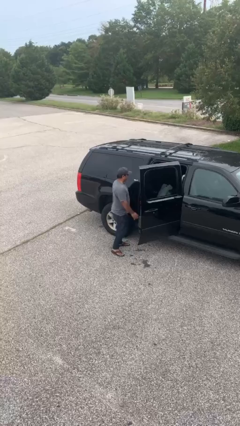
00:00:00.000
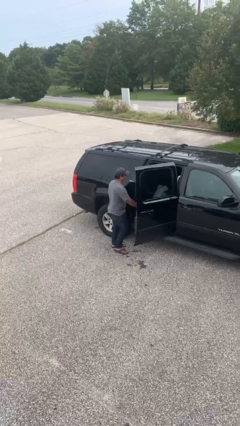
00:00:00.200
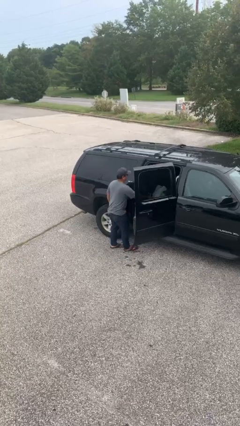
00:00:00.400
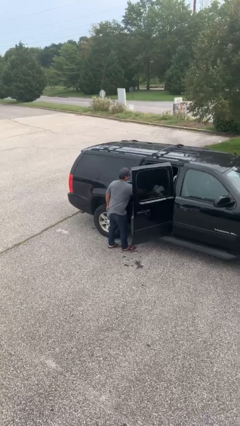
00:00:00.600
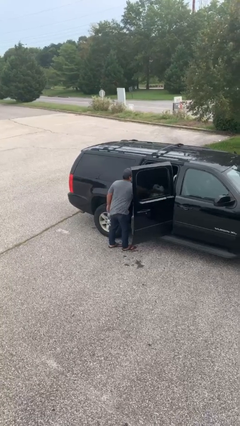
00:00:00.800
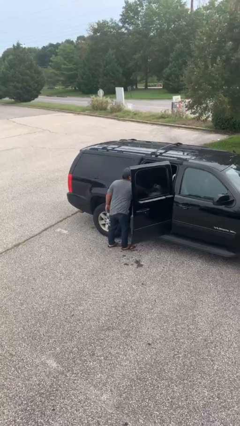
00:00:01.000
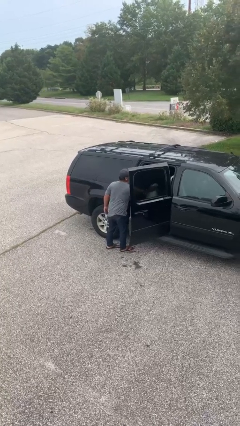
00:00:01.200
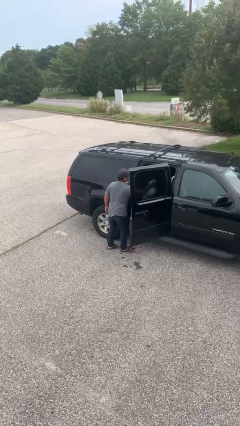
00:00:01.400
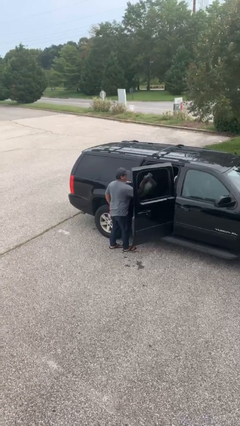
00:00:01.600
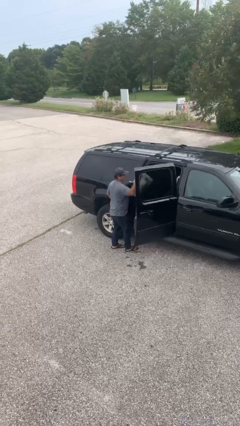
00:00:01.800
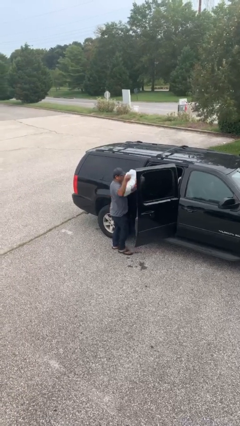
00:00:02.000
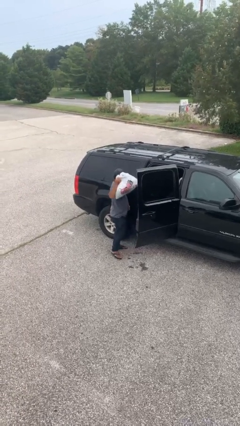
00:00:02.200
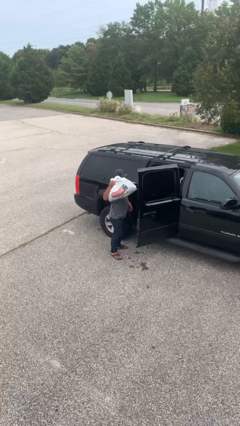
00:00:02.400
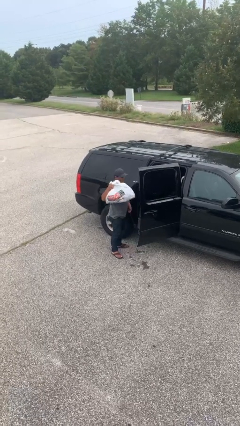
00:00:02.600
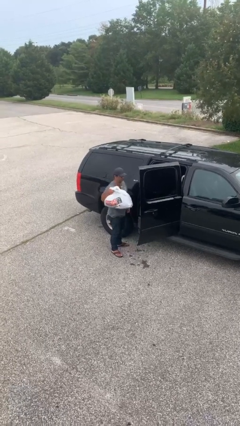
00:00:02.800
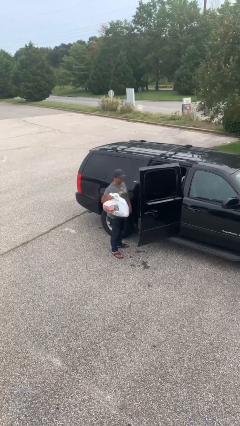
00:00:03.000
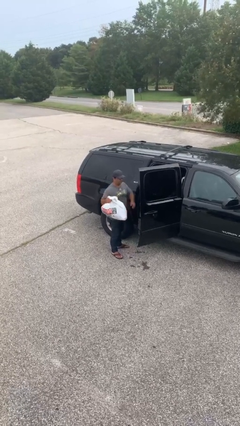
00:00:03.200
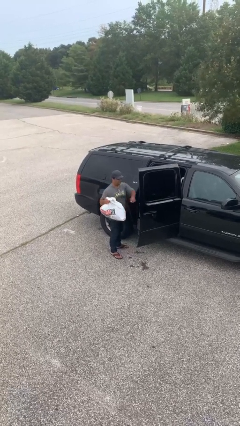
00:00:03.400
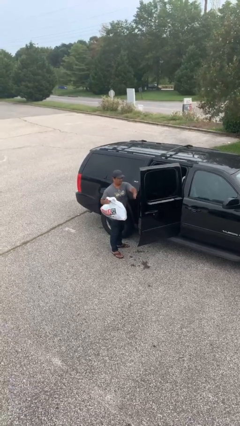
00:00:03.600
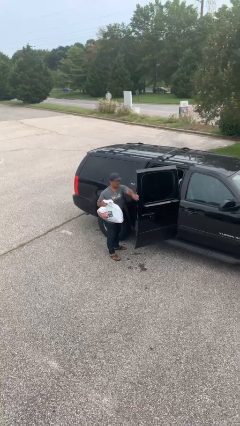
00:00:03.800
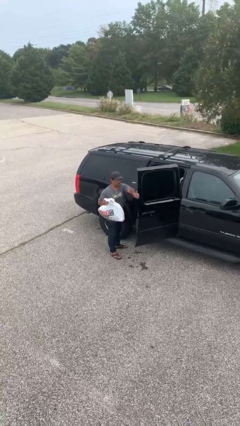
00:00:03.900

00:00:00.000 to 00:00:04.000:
person unloads car

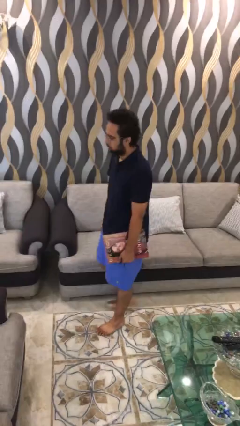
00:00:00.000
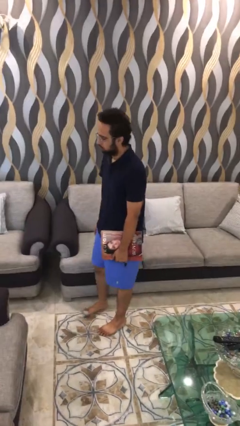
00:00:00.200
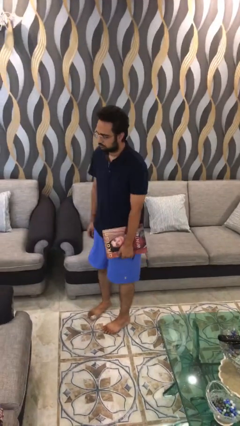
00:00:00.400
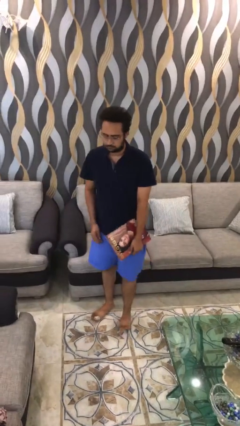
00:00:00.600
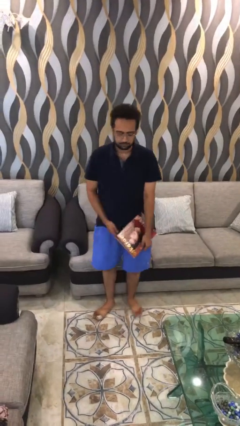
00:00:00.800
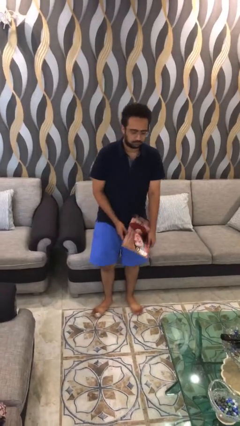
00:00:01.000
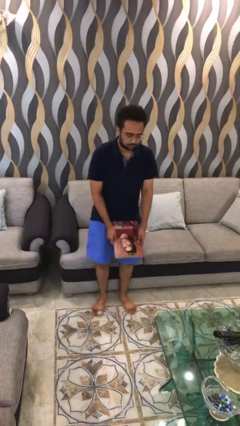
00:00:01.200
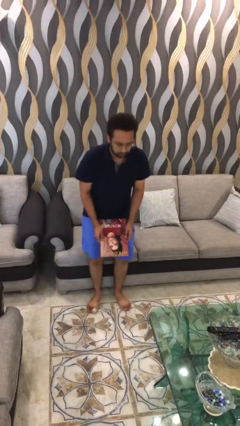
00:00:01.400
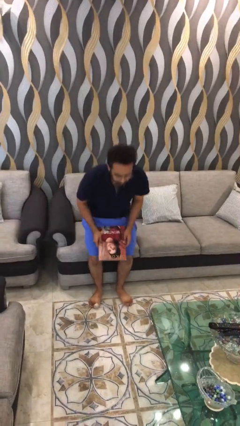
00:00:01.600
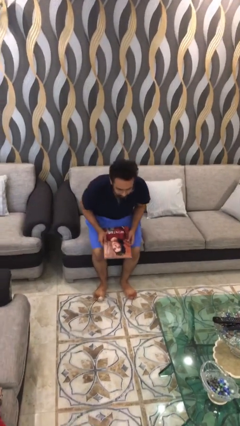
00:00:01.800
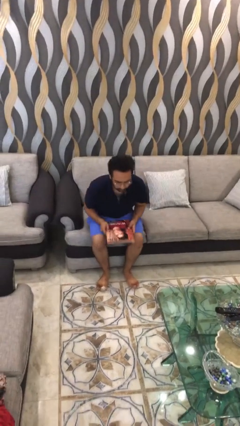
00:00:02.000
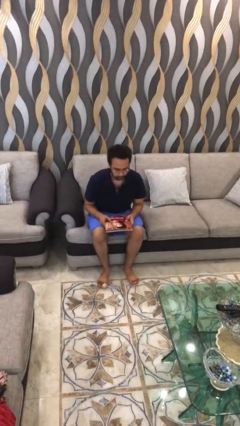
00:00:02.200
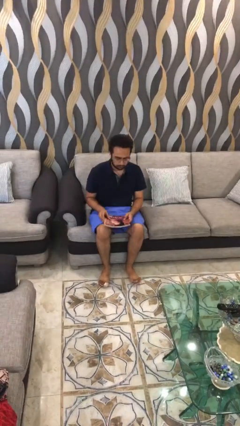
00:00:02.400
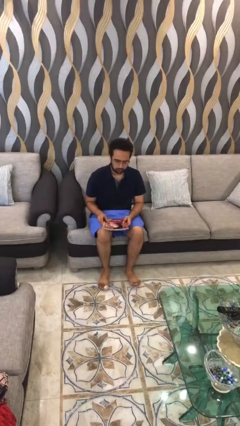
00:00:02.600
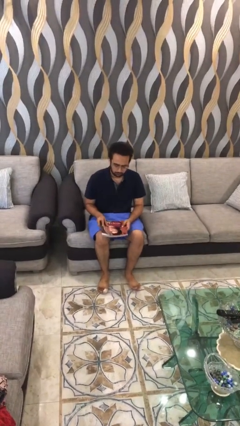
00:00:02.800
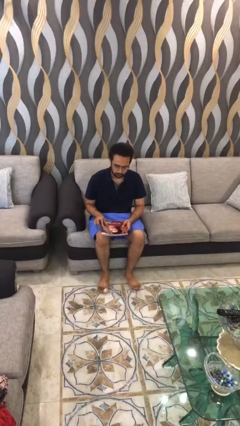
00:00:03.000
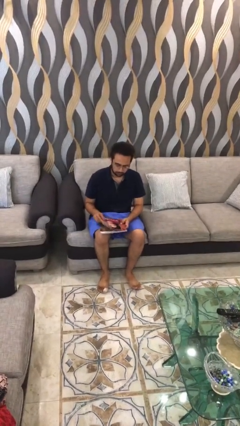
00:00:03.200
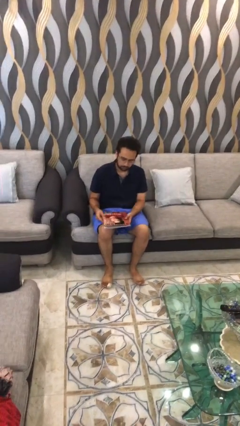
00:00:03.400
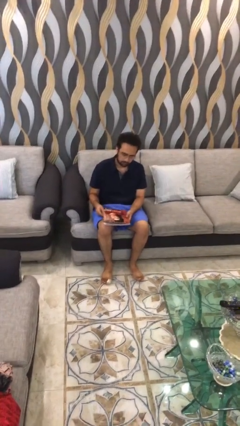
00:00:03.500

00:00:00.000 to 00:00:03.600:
person sits down

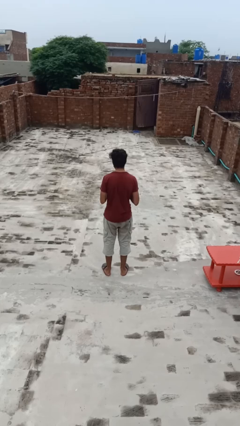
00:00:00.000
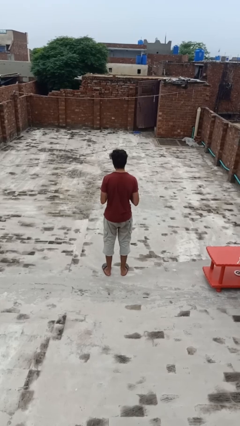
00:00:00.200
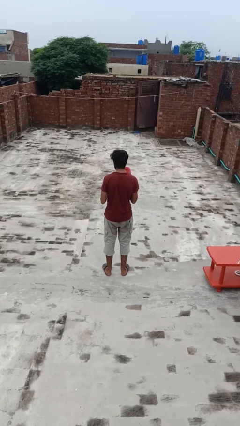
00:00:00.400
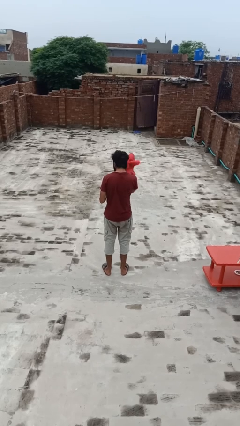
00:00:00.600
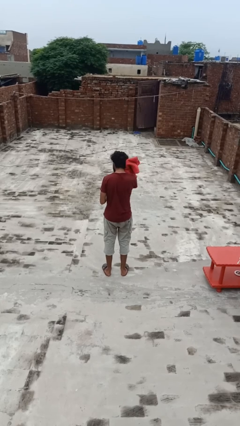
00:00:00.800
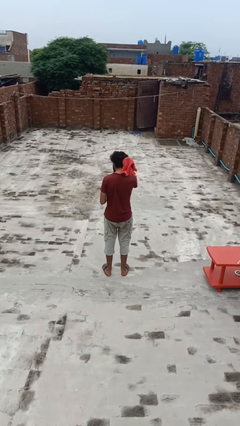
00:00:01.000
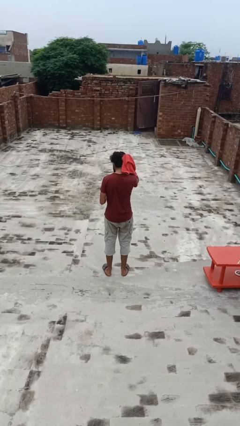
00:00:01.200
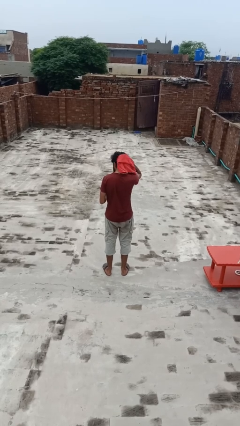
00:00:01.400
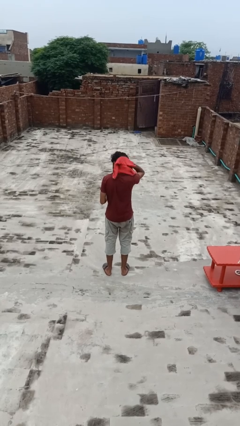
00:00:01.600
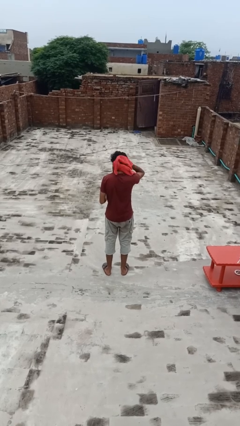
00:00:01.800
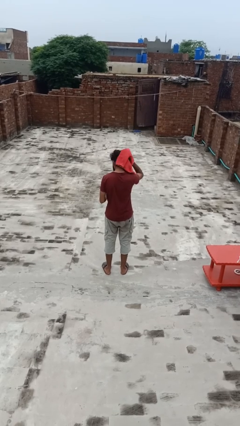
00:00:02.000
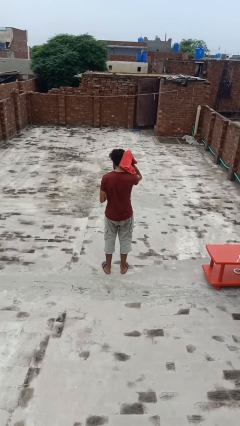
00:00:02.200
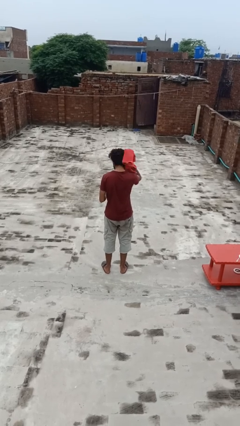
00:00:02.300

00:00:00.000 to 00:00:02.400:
person dries hair with towel

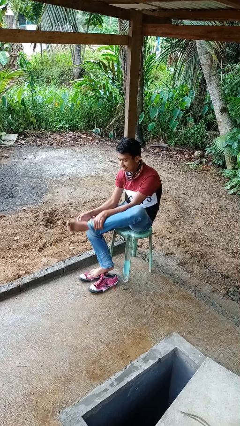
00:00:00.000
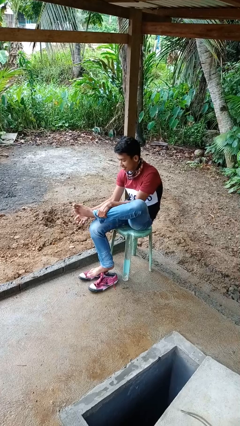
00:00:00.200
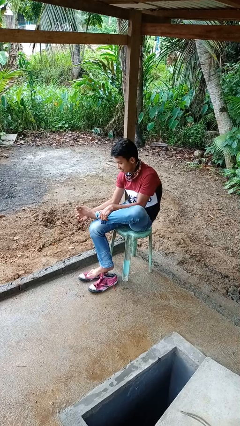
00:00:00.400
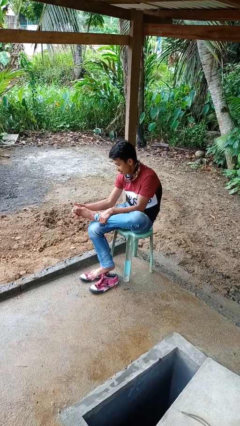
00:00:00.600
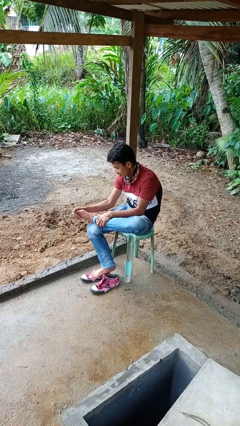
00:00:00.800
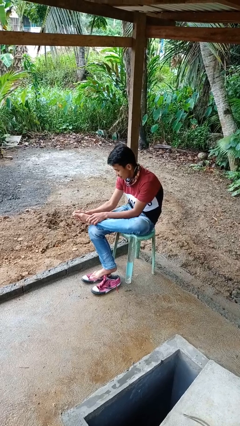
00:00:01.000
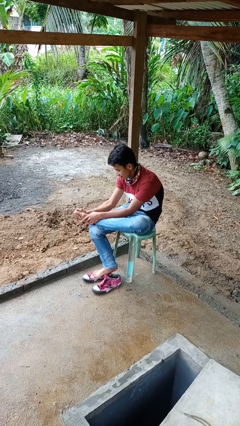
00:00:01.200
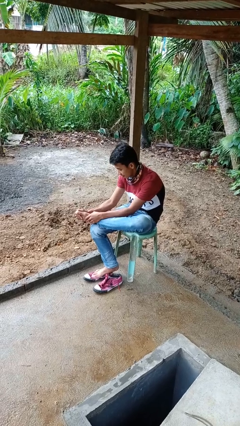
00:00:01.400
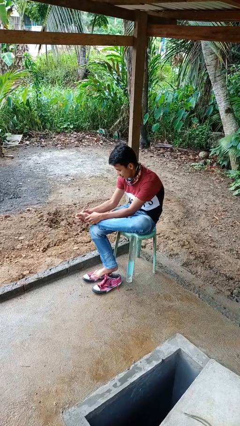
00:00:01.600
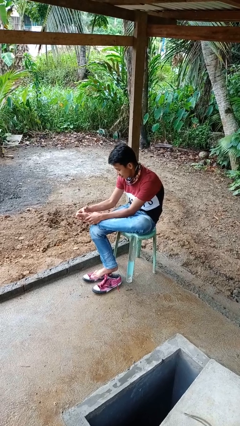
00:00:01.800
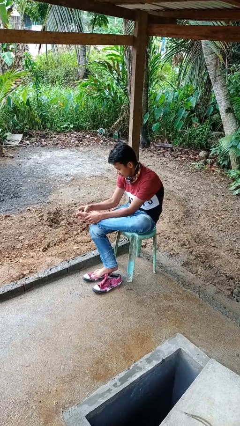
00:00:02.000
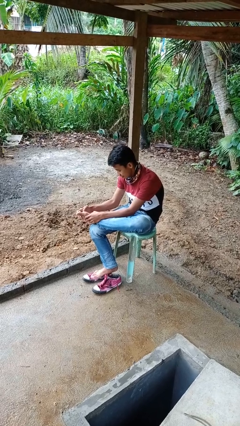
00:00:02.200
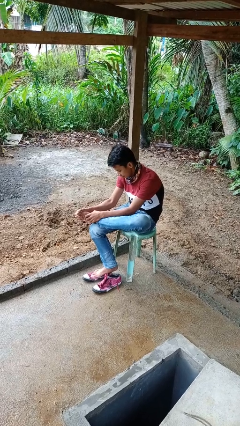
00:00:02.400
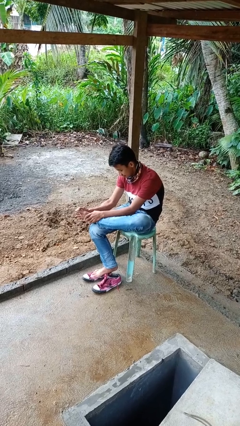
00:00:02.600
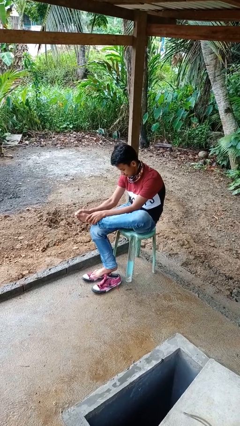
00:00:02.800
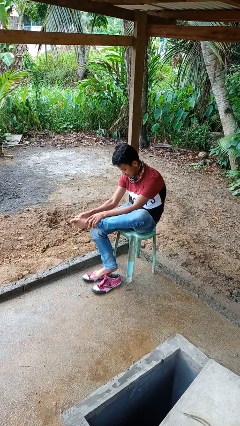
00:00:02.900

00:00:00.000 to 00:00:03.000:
person rubs foot

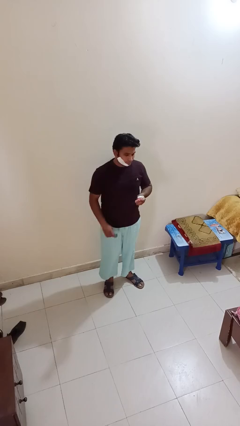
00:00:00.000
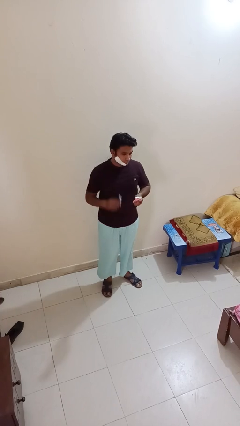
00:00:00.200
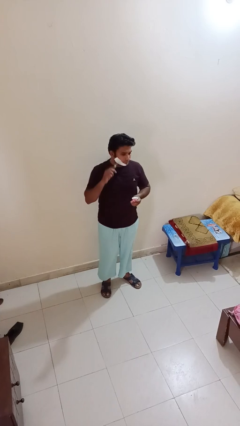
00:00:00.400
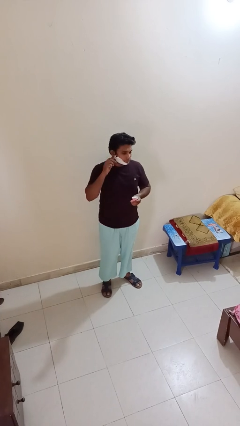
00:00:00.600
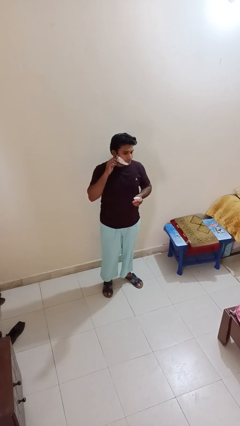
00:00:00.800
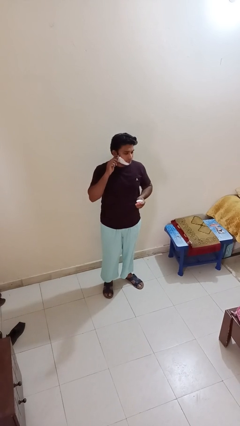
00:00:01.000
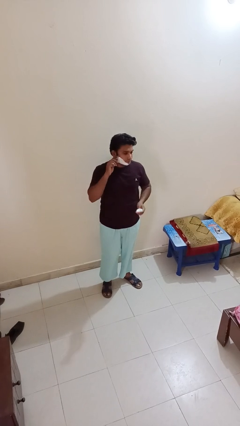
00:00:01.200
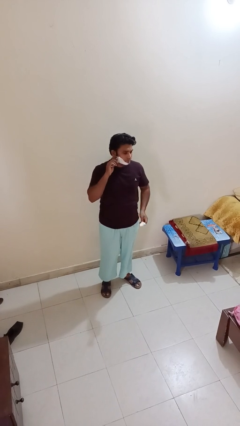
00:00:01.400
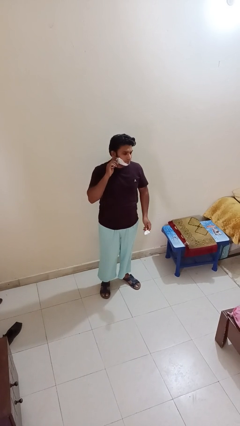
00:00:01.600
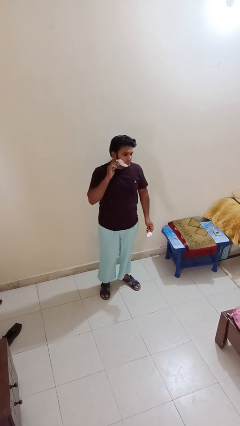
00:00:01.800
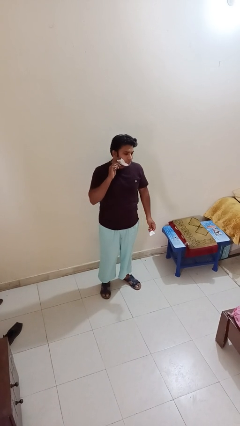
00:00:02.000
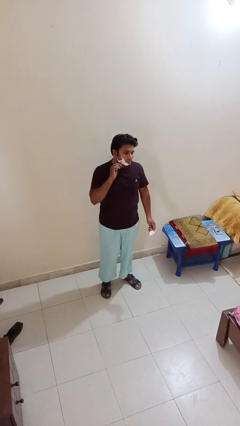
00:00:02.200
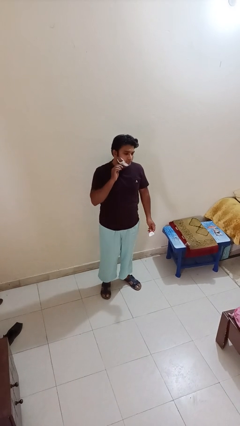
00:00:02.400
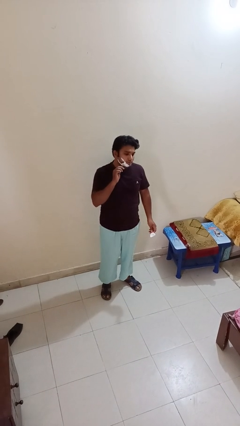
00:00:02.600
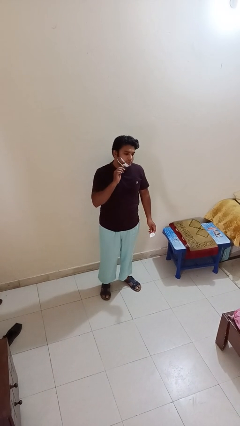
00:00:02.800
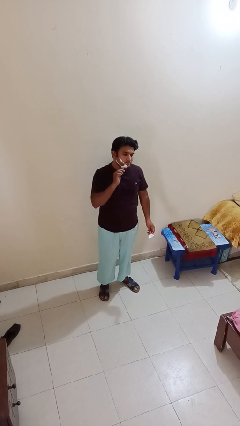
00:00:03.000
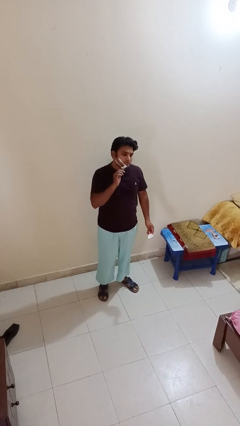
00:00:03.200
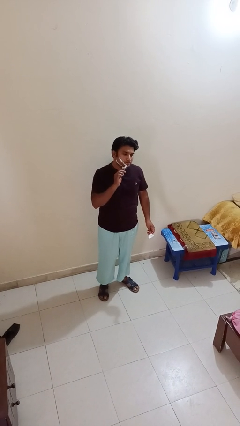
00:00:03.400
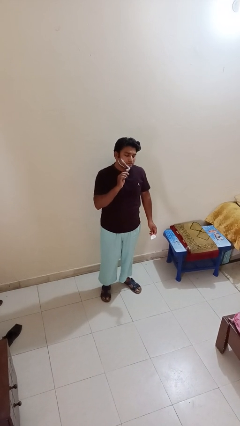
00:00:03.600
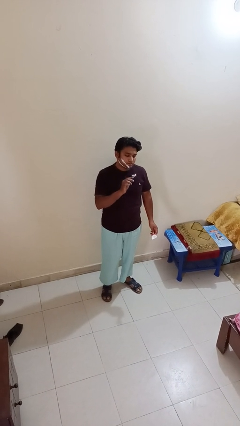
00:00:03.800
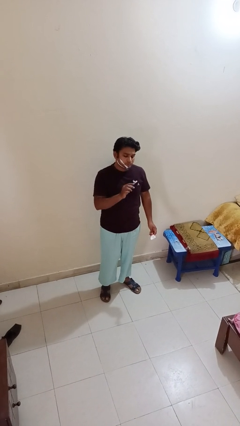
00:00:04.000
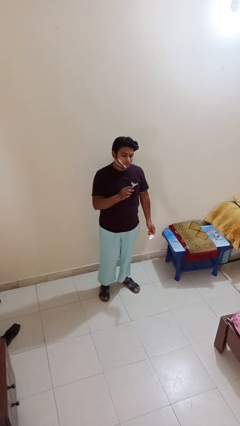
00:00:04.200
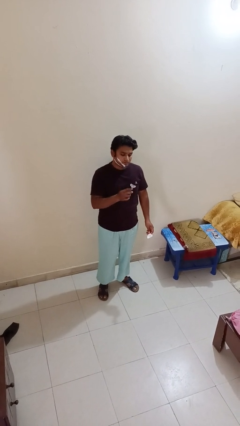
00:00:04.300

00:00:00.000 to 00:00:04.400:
person shaves face
